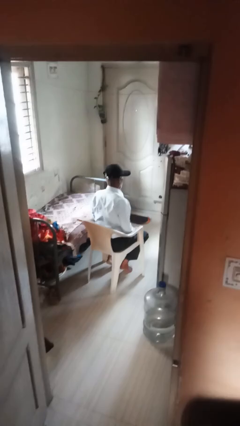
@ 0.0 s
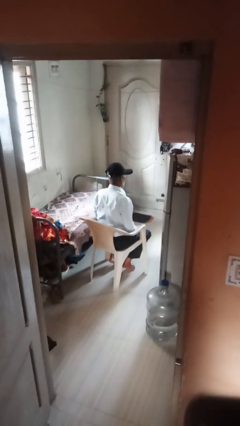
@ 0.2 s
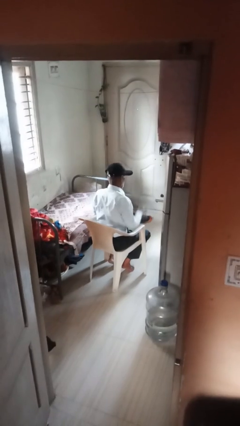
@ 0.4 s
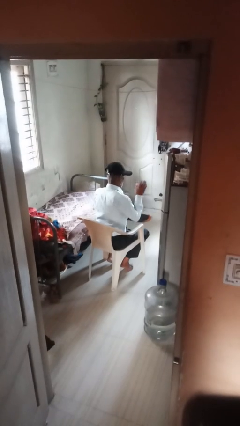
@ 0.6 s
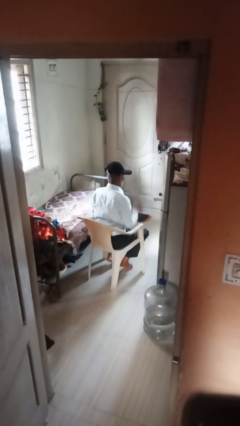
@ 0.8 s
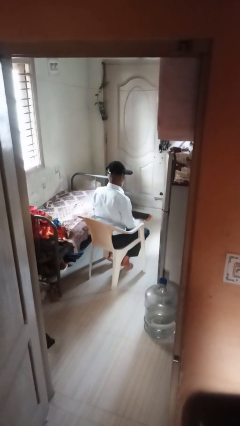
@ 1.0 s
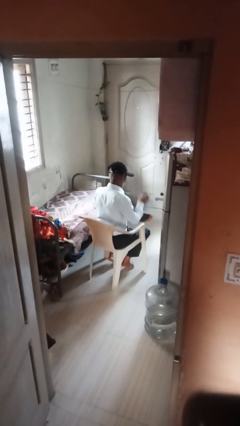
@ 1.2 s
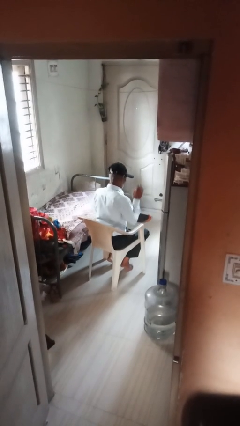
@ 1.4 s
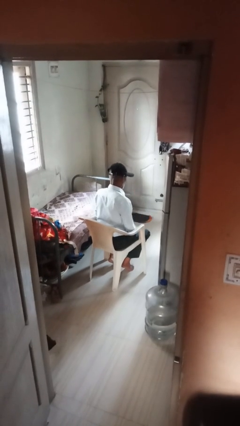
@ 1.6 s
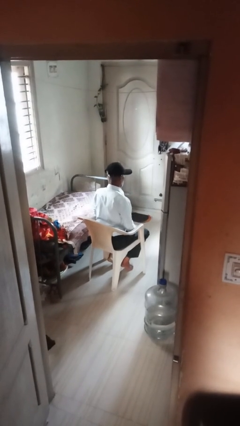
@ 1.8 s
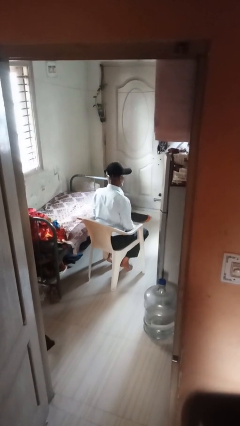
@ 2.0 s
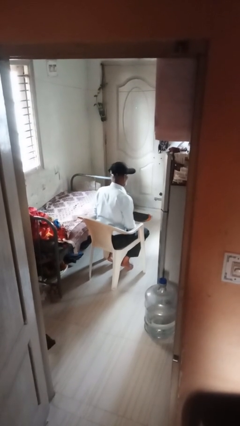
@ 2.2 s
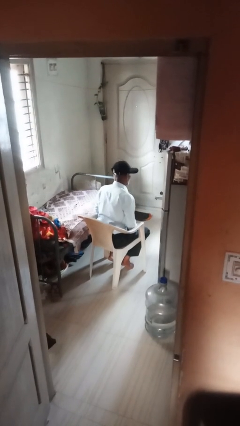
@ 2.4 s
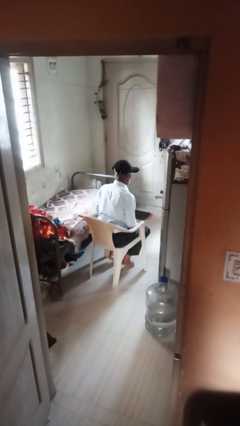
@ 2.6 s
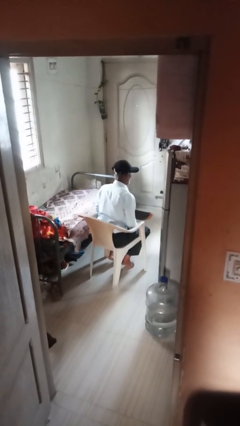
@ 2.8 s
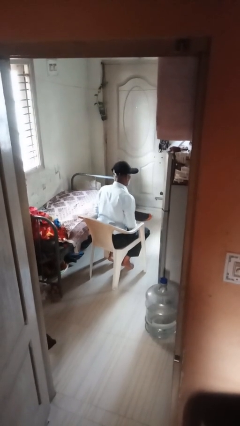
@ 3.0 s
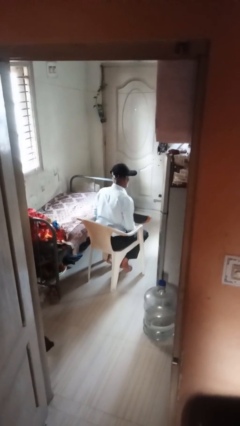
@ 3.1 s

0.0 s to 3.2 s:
person slaps hands on thighs

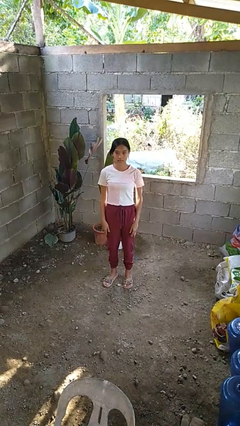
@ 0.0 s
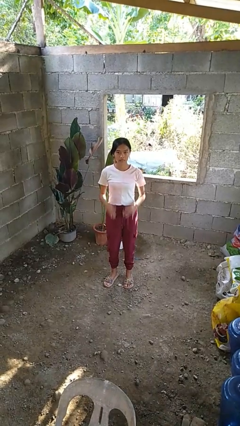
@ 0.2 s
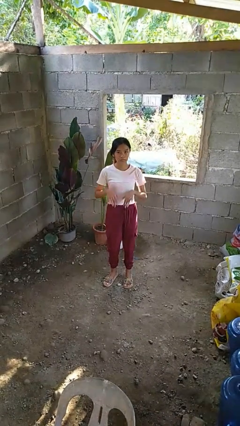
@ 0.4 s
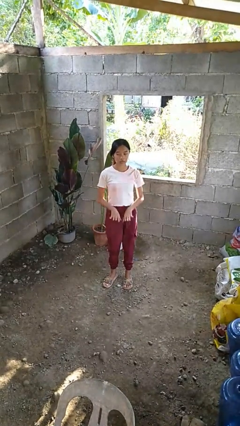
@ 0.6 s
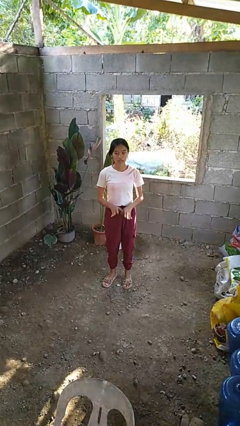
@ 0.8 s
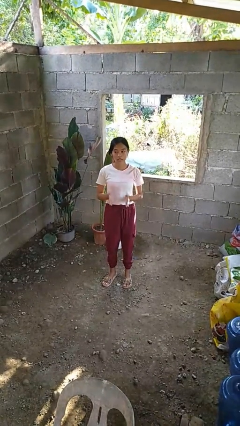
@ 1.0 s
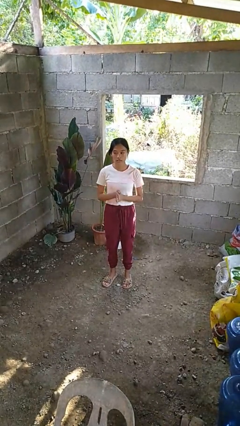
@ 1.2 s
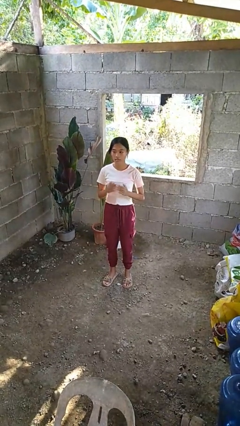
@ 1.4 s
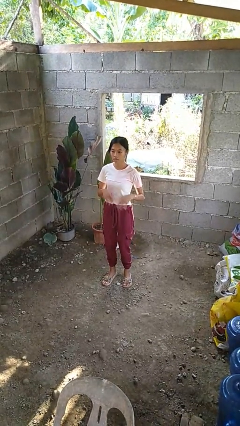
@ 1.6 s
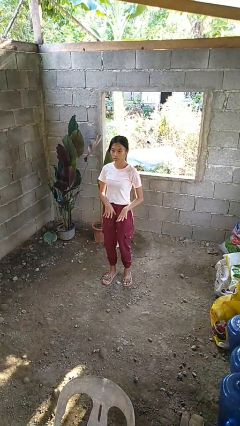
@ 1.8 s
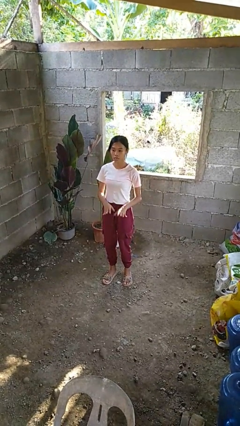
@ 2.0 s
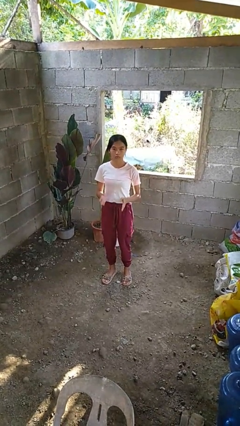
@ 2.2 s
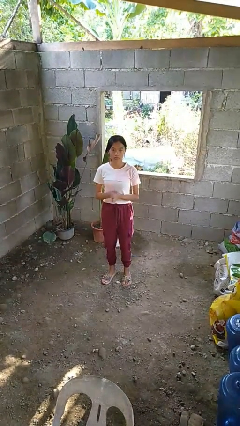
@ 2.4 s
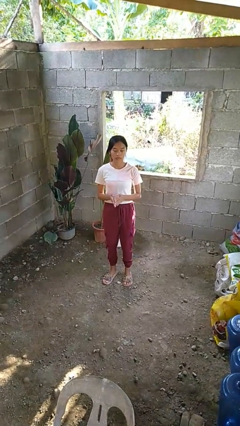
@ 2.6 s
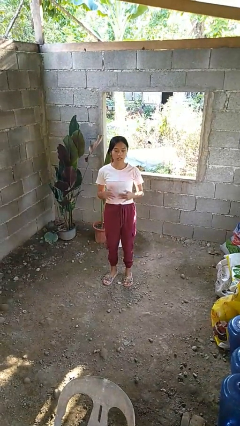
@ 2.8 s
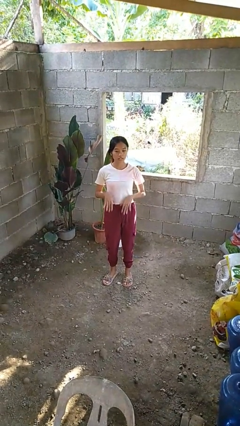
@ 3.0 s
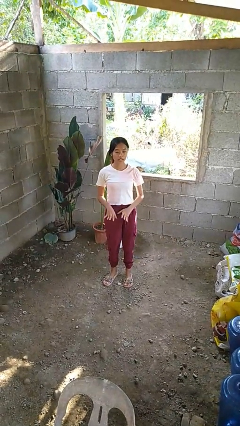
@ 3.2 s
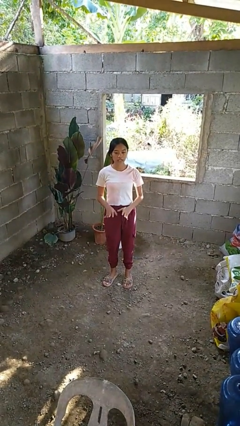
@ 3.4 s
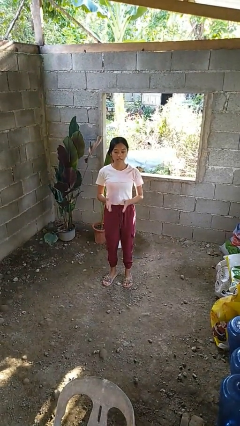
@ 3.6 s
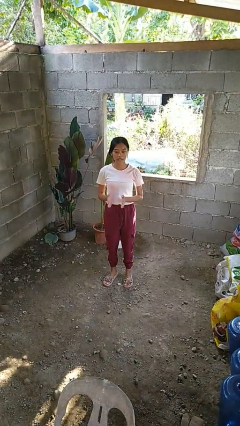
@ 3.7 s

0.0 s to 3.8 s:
person dances in place

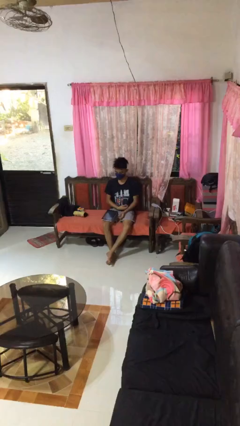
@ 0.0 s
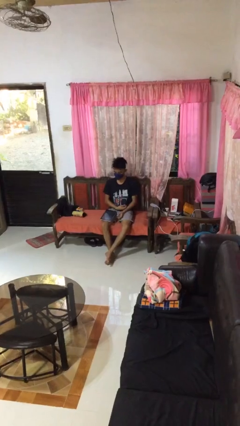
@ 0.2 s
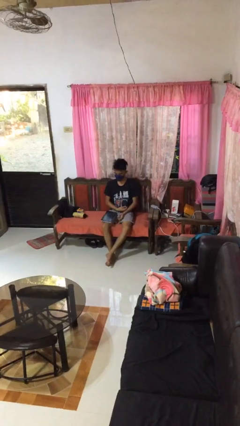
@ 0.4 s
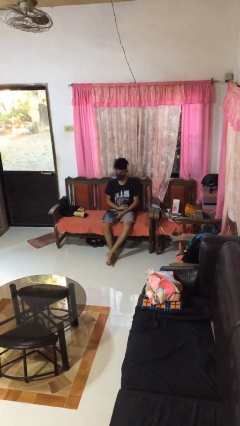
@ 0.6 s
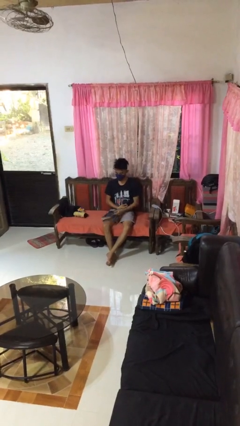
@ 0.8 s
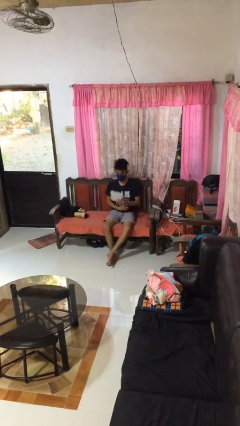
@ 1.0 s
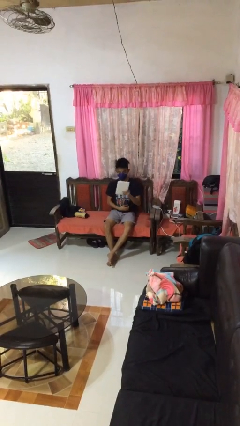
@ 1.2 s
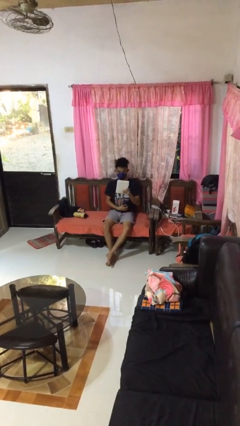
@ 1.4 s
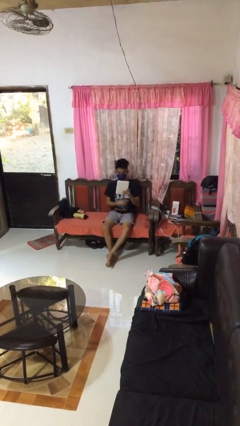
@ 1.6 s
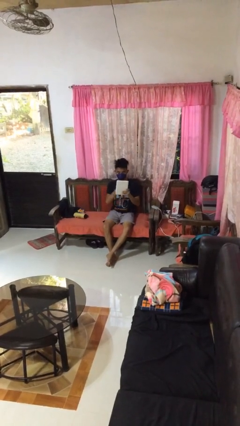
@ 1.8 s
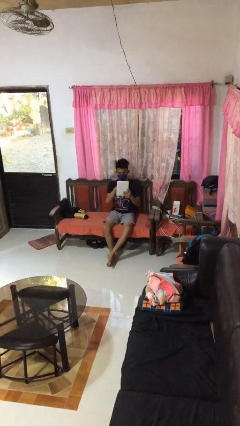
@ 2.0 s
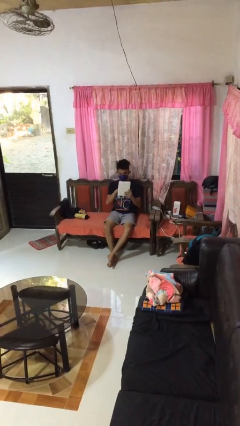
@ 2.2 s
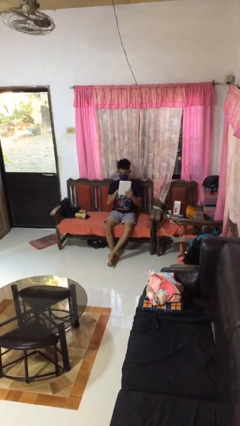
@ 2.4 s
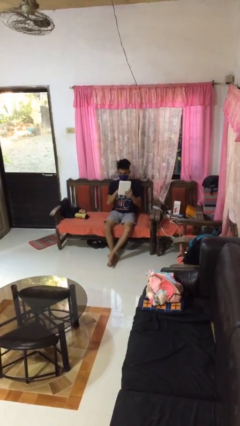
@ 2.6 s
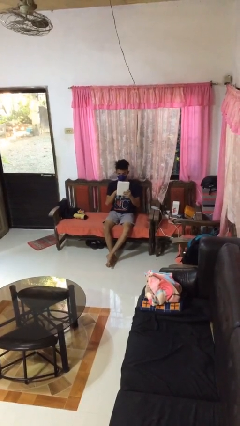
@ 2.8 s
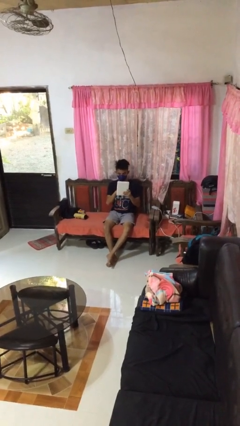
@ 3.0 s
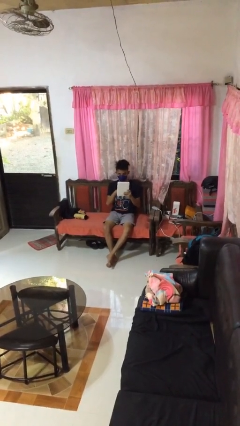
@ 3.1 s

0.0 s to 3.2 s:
person interacts with tablet

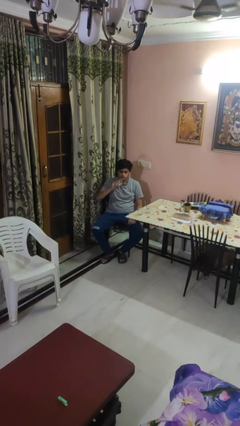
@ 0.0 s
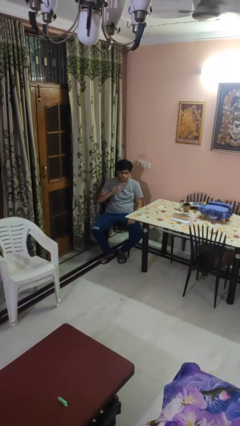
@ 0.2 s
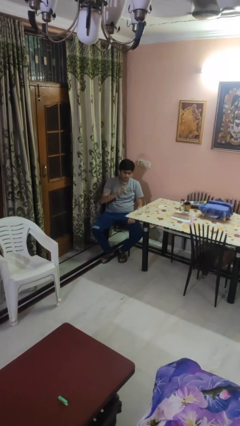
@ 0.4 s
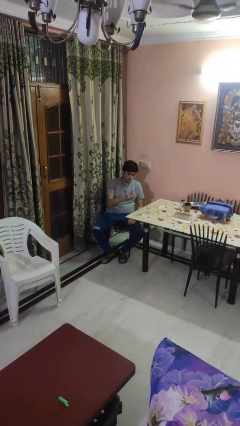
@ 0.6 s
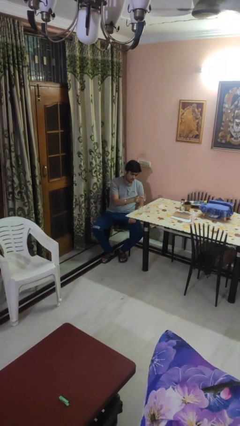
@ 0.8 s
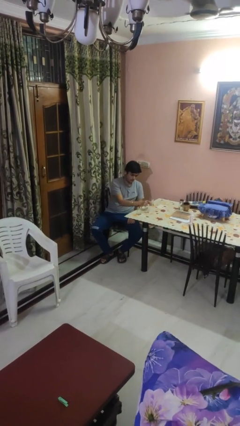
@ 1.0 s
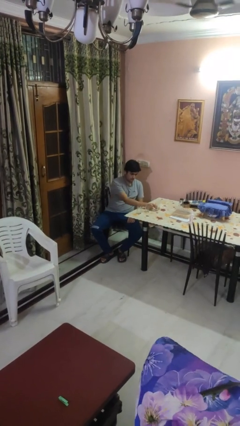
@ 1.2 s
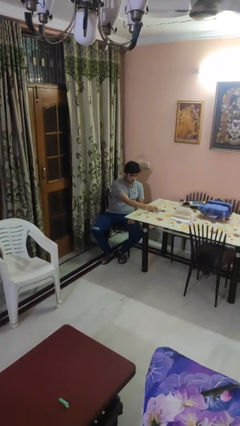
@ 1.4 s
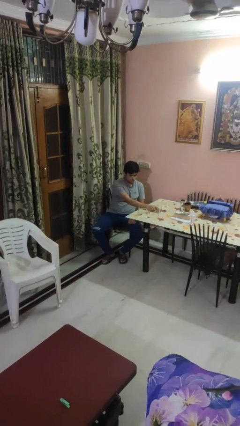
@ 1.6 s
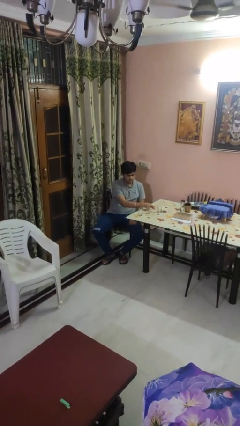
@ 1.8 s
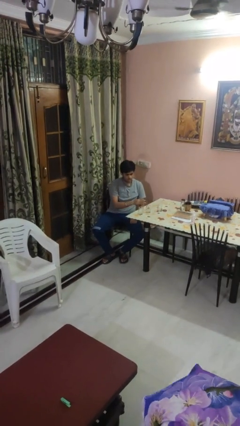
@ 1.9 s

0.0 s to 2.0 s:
person puts down object on table

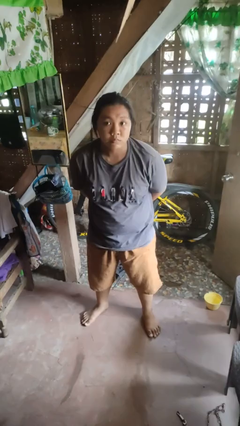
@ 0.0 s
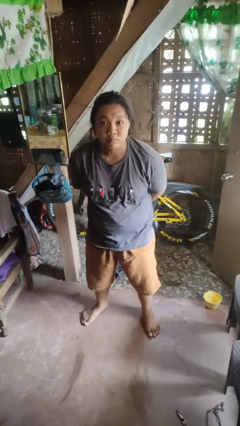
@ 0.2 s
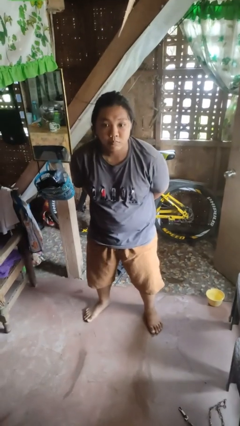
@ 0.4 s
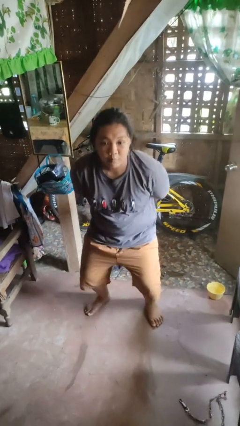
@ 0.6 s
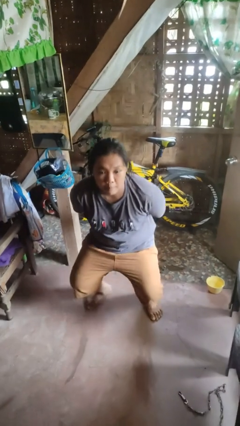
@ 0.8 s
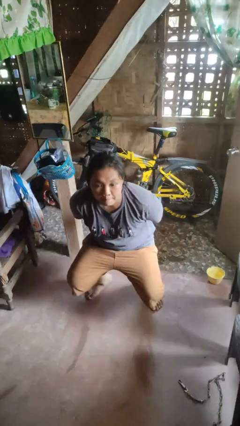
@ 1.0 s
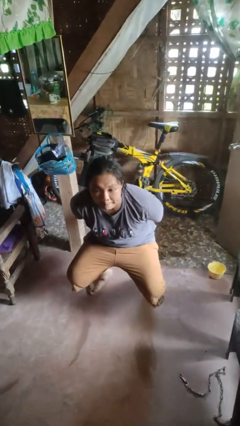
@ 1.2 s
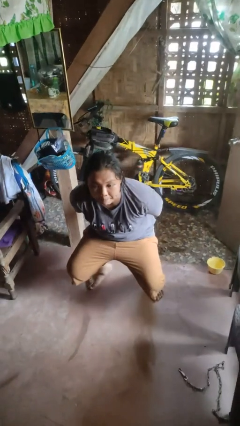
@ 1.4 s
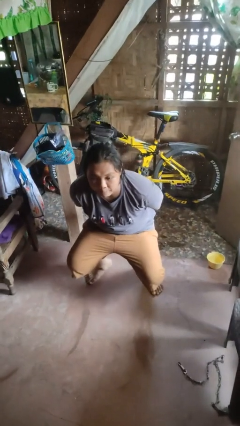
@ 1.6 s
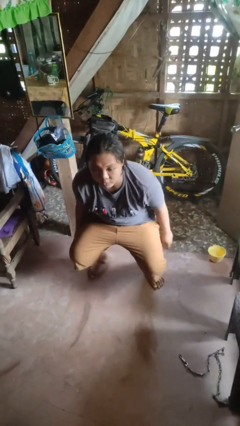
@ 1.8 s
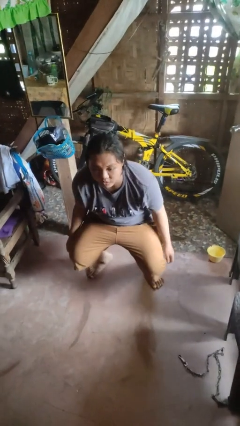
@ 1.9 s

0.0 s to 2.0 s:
person squats

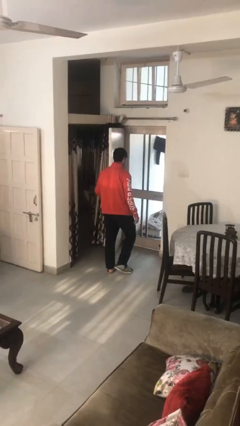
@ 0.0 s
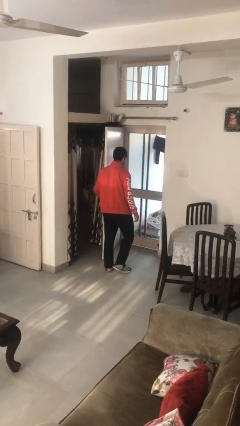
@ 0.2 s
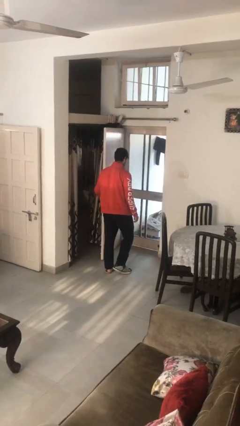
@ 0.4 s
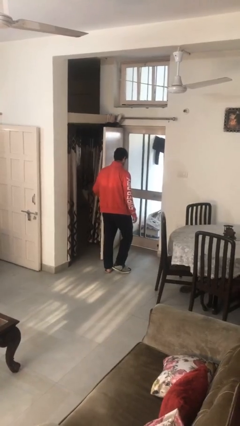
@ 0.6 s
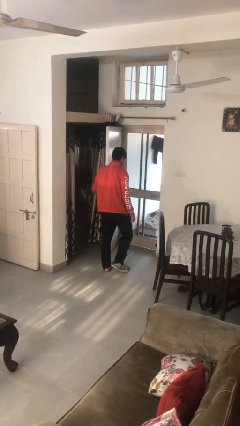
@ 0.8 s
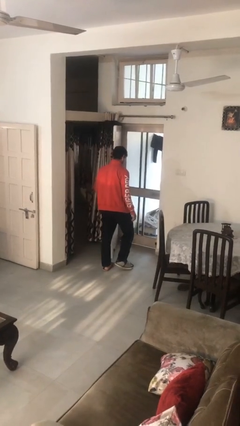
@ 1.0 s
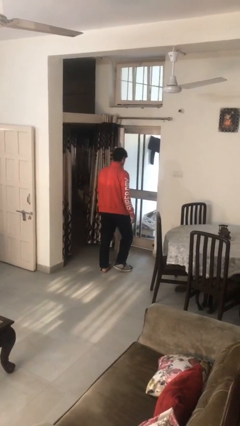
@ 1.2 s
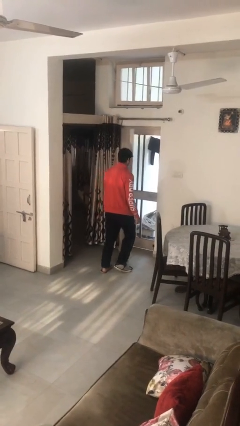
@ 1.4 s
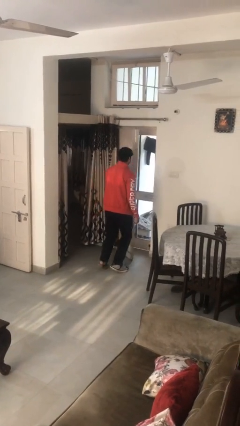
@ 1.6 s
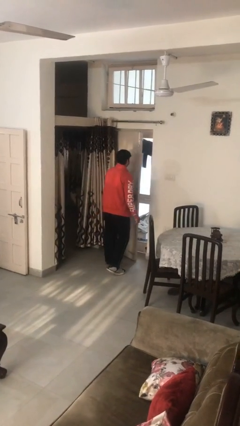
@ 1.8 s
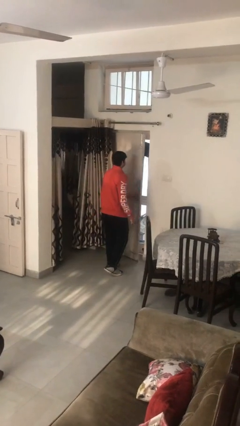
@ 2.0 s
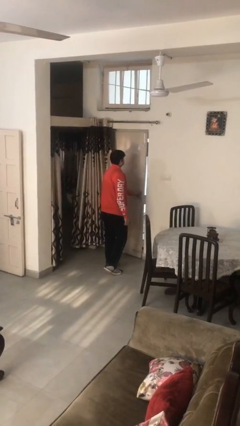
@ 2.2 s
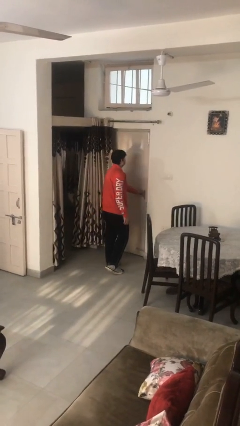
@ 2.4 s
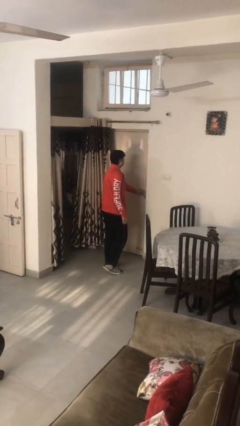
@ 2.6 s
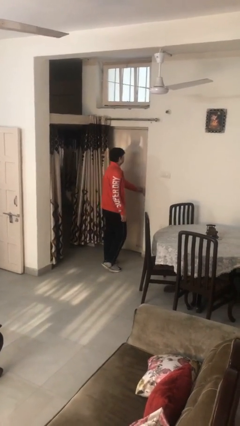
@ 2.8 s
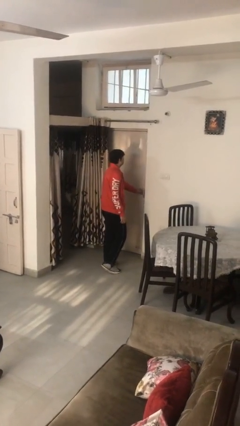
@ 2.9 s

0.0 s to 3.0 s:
person closes facility door

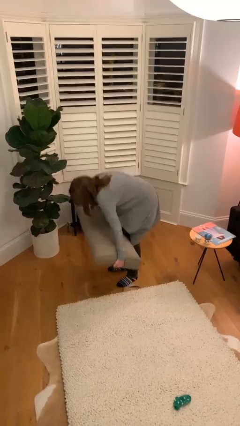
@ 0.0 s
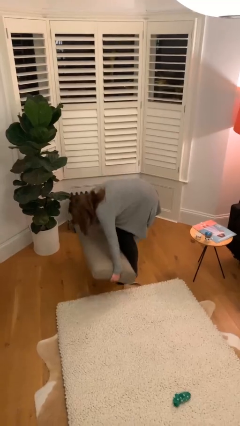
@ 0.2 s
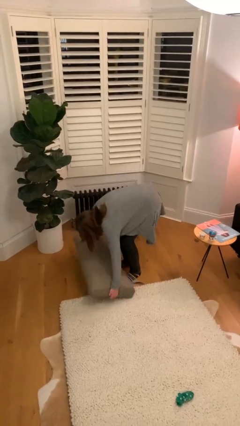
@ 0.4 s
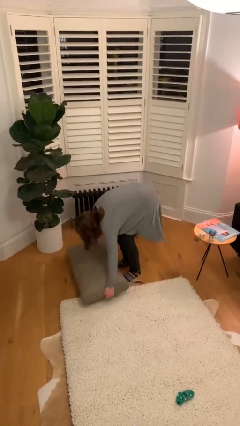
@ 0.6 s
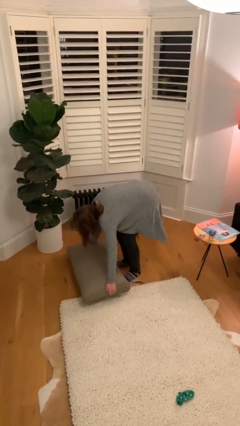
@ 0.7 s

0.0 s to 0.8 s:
person puts down object on floor
